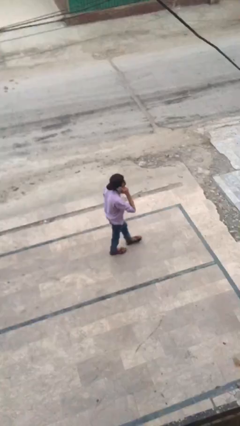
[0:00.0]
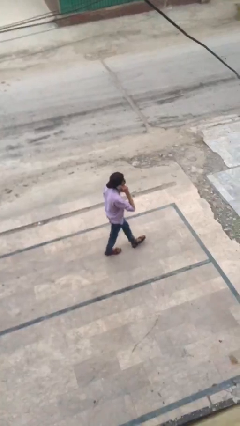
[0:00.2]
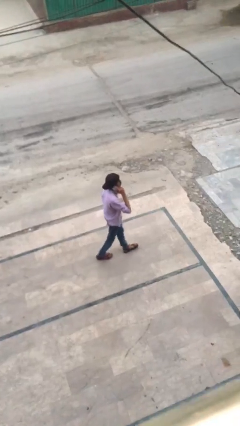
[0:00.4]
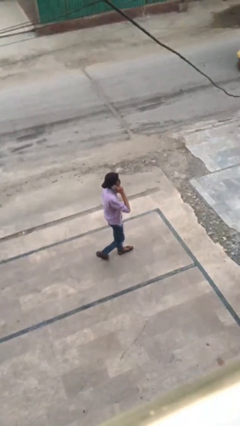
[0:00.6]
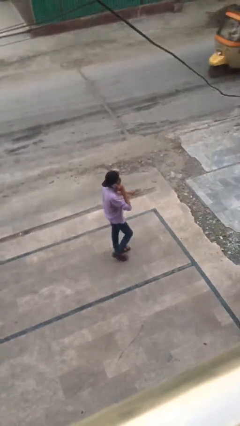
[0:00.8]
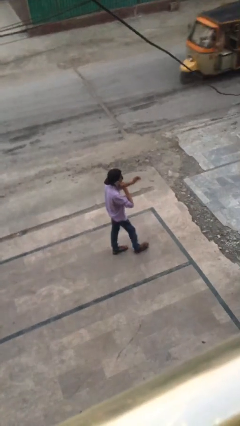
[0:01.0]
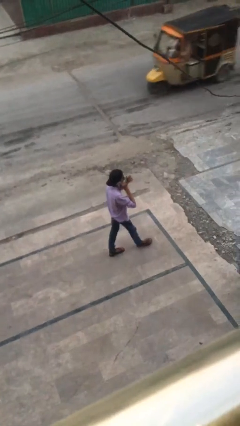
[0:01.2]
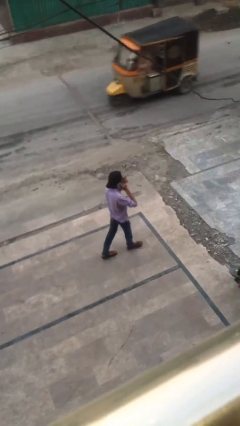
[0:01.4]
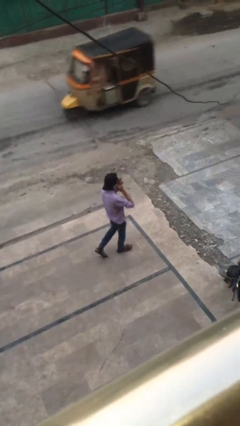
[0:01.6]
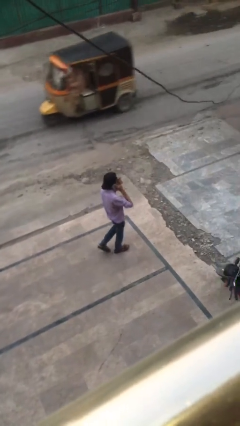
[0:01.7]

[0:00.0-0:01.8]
person talks on phone

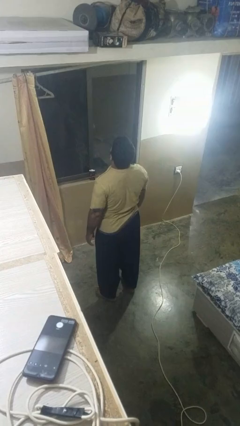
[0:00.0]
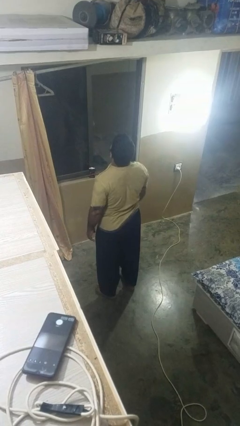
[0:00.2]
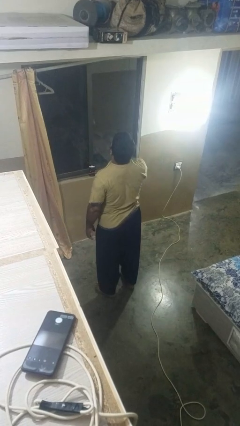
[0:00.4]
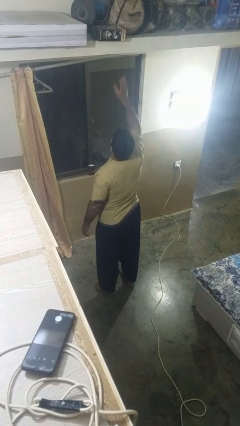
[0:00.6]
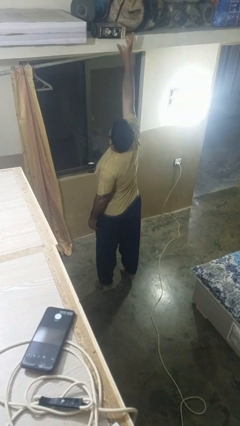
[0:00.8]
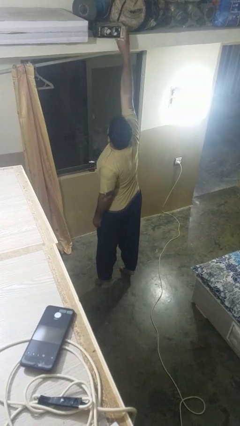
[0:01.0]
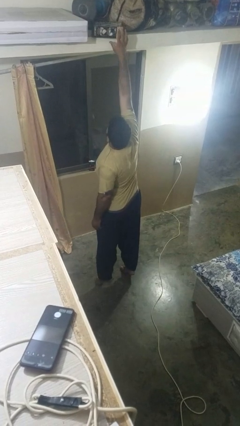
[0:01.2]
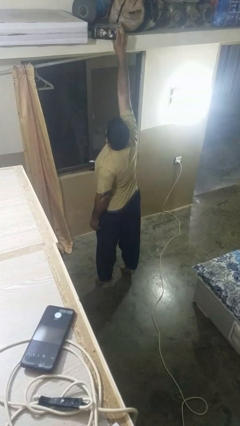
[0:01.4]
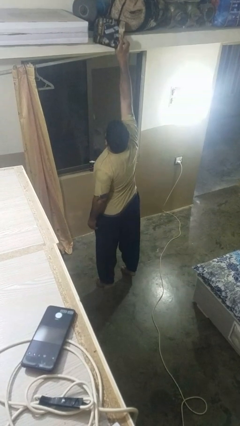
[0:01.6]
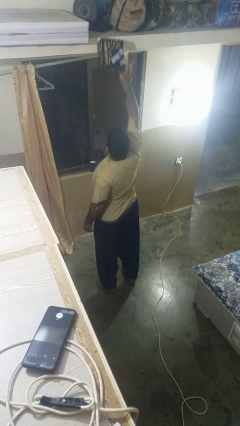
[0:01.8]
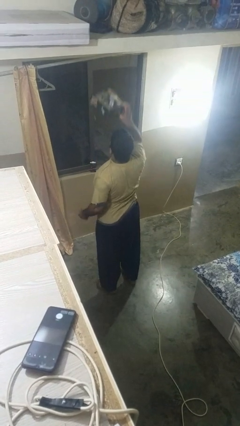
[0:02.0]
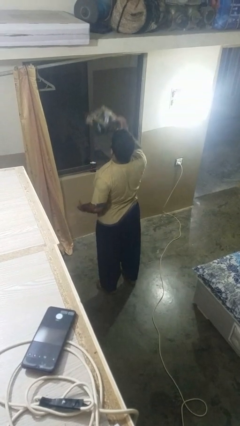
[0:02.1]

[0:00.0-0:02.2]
person picks up object from shelf

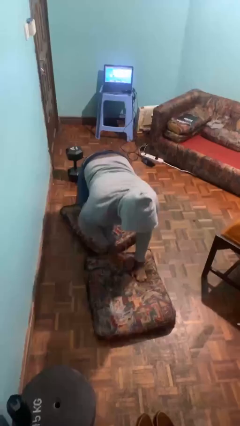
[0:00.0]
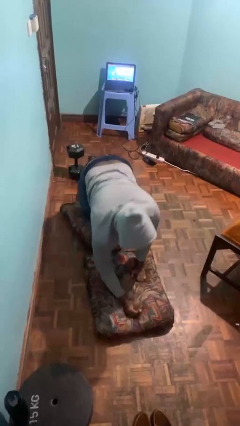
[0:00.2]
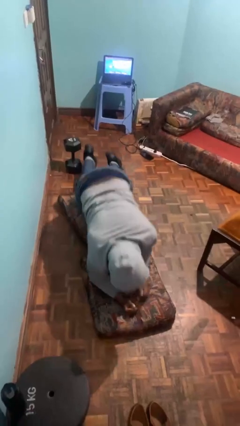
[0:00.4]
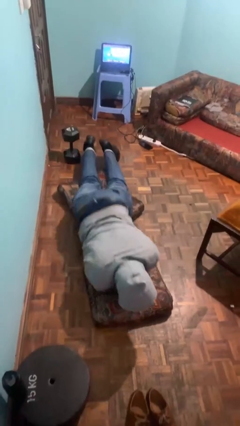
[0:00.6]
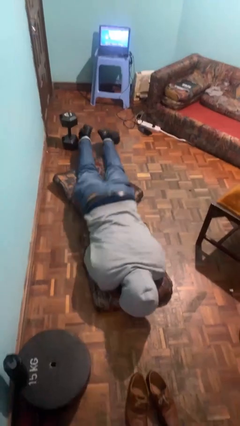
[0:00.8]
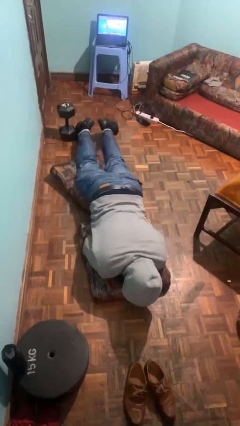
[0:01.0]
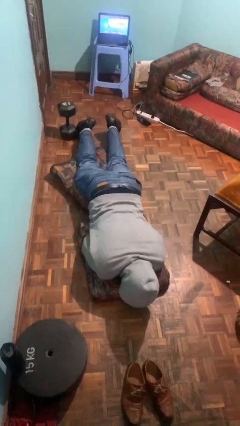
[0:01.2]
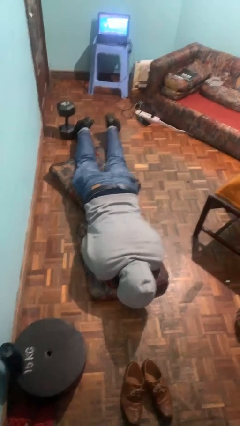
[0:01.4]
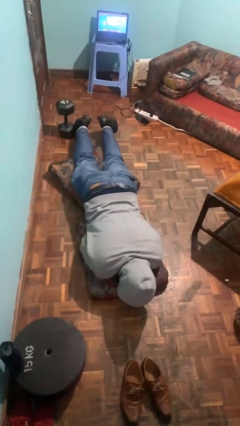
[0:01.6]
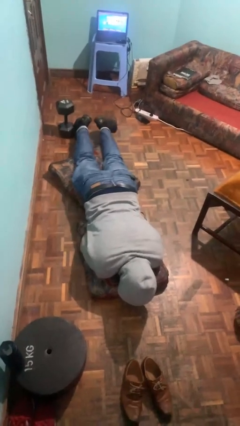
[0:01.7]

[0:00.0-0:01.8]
person lies down on floor

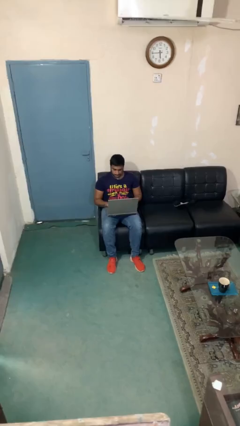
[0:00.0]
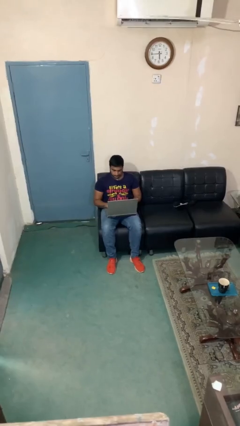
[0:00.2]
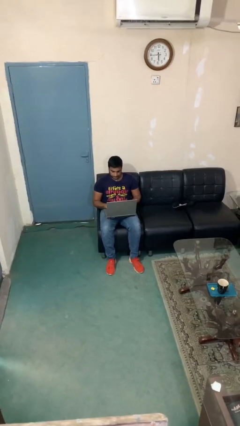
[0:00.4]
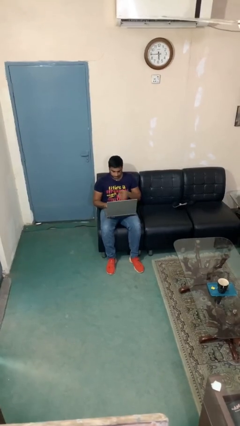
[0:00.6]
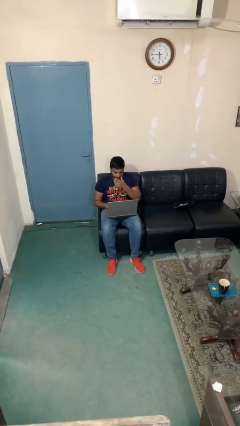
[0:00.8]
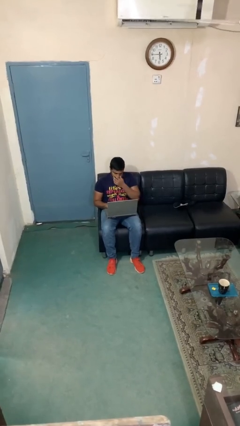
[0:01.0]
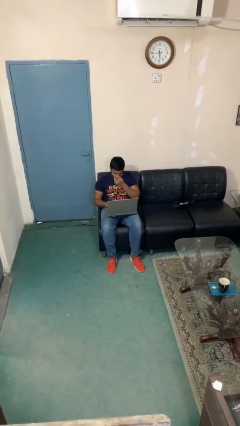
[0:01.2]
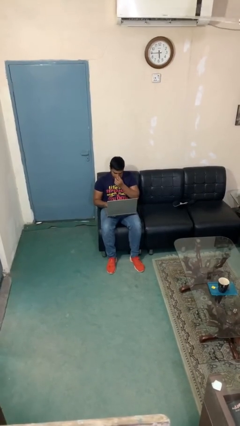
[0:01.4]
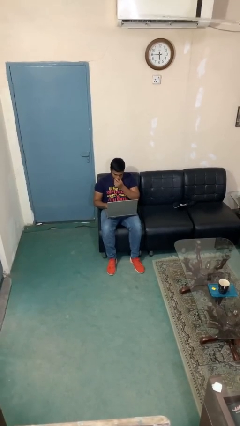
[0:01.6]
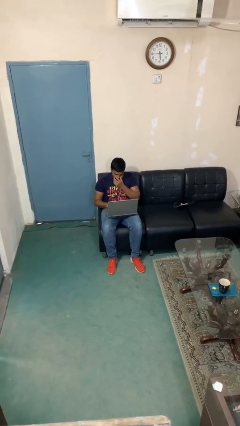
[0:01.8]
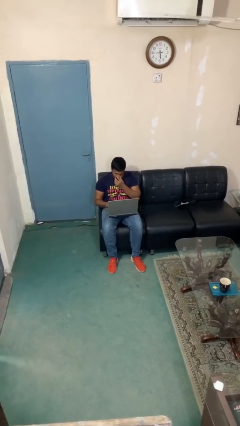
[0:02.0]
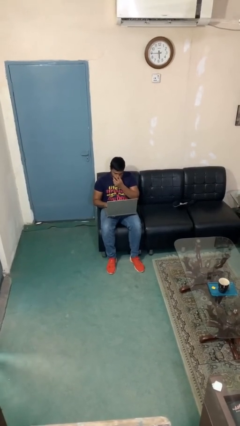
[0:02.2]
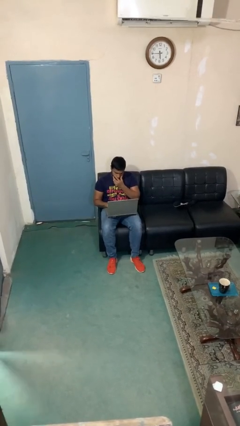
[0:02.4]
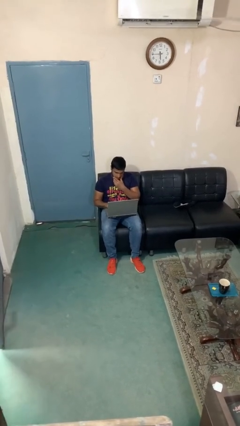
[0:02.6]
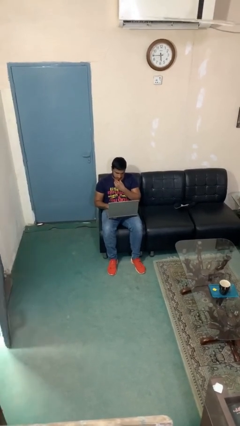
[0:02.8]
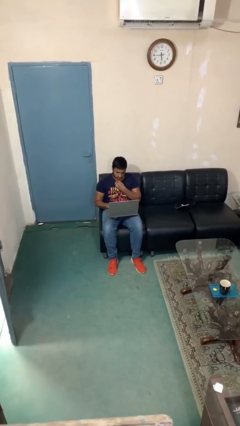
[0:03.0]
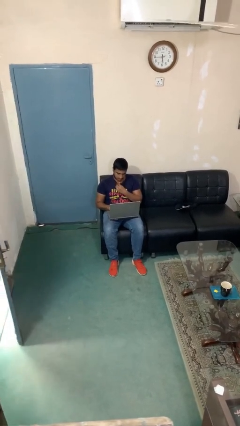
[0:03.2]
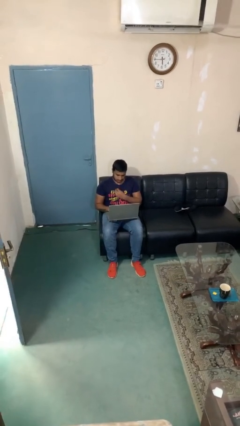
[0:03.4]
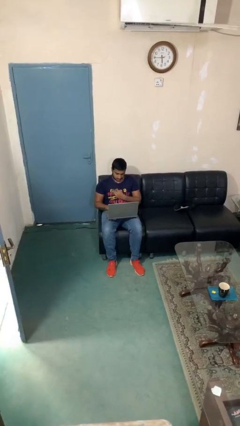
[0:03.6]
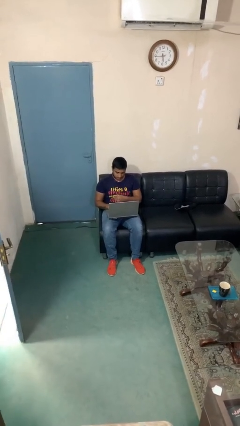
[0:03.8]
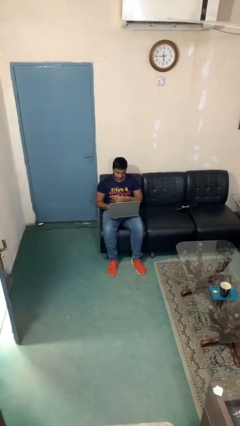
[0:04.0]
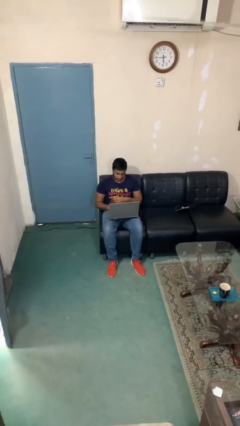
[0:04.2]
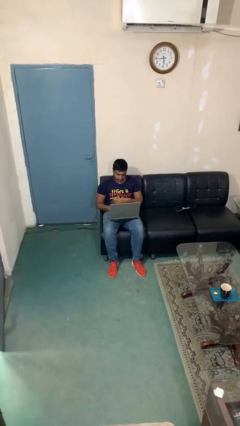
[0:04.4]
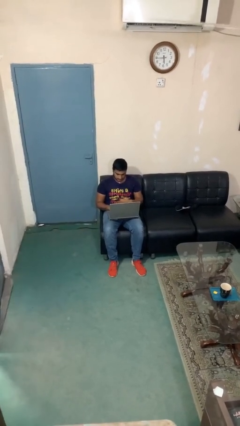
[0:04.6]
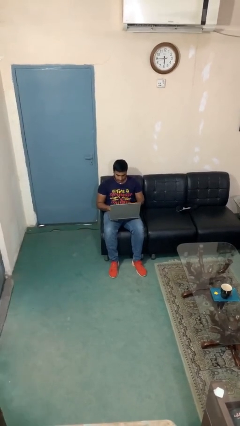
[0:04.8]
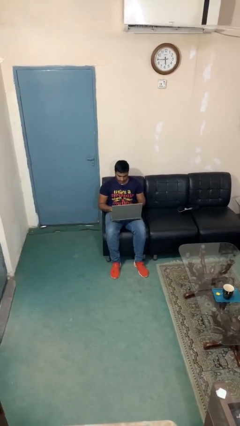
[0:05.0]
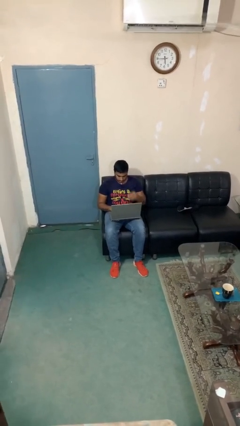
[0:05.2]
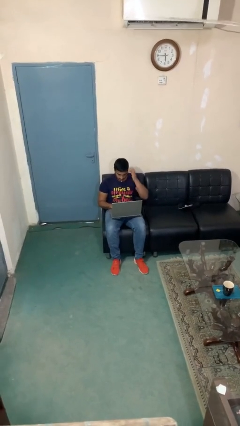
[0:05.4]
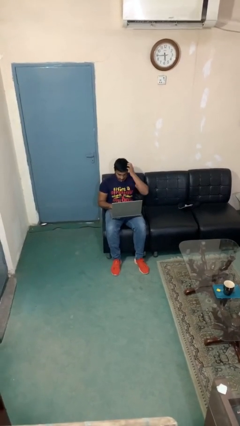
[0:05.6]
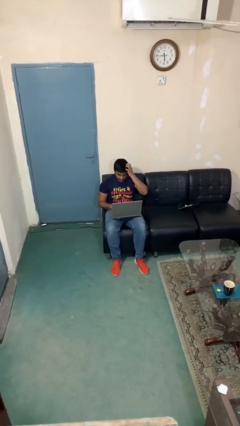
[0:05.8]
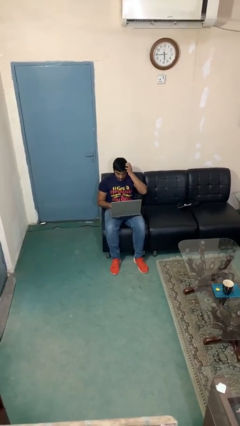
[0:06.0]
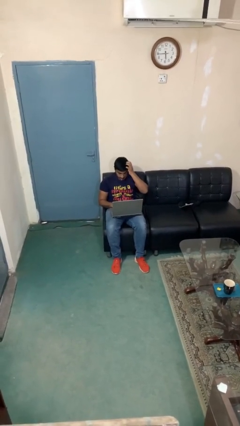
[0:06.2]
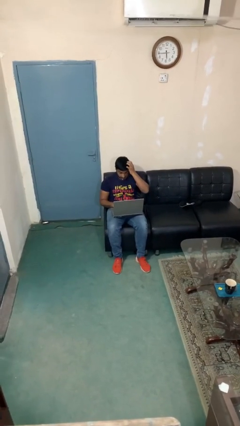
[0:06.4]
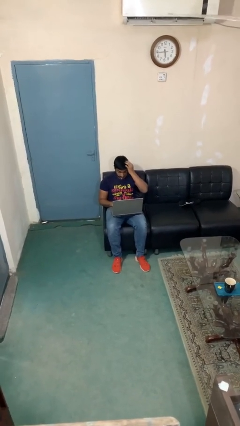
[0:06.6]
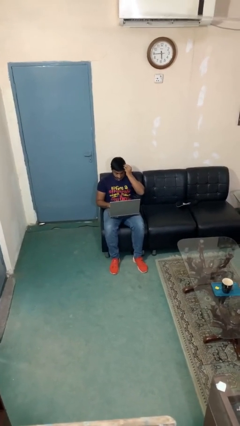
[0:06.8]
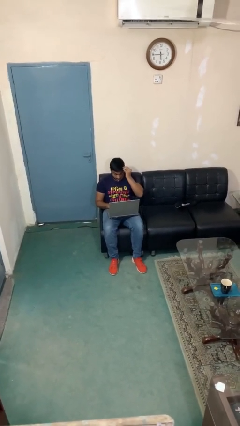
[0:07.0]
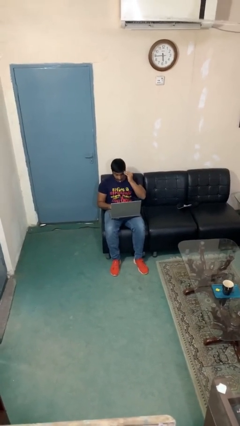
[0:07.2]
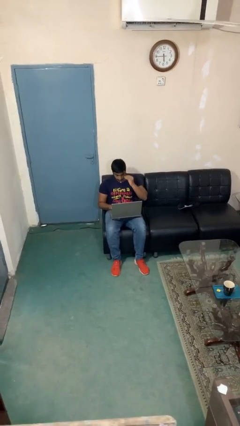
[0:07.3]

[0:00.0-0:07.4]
person interacts with laptop

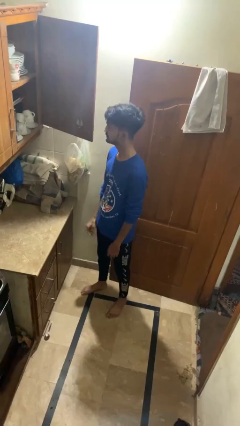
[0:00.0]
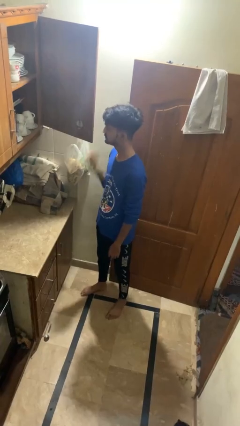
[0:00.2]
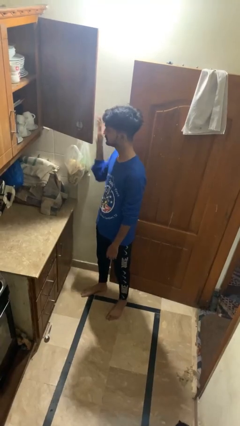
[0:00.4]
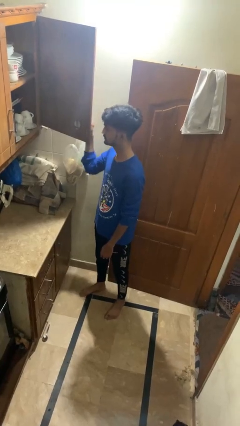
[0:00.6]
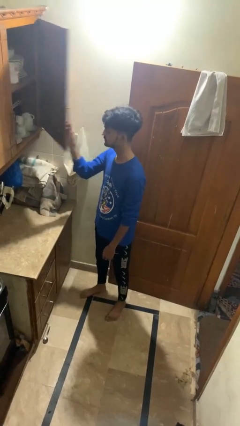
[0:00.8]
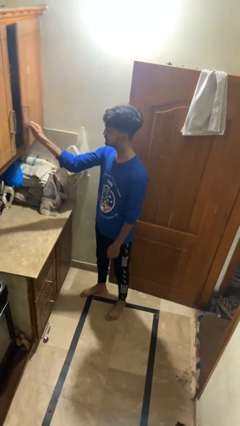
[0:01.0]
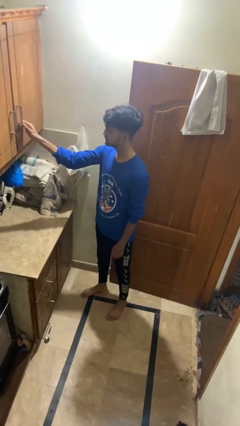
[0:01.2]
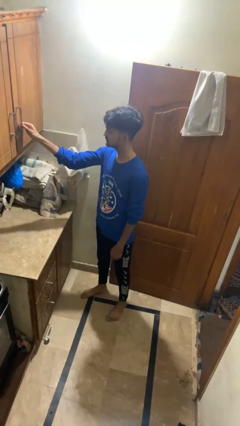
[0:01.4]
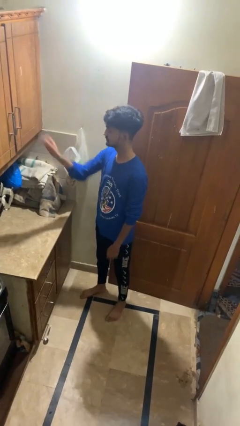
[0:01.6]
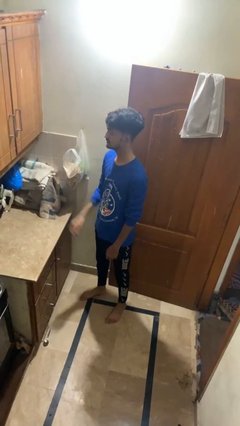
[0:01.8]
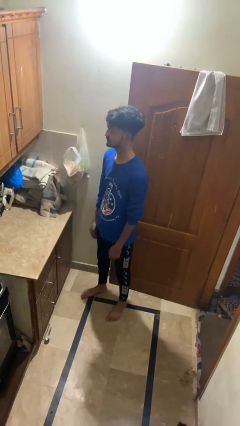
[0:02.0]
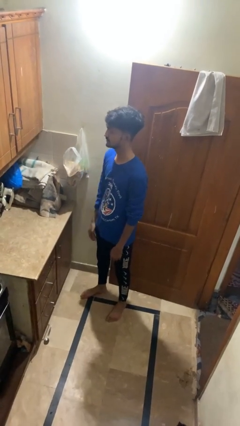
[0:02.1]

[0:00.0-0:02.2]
person closes cabinet

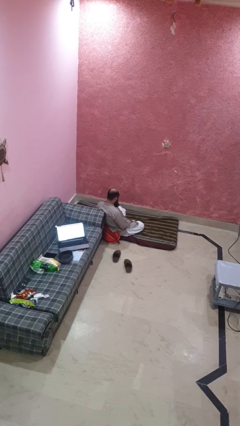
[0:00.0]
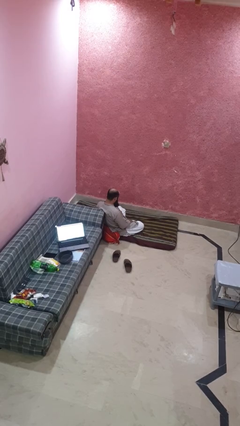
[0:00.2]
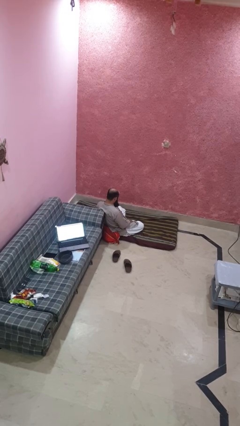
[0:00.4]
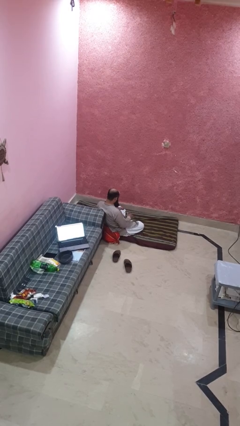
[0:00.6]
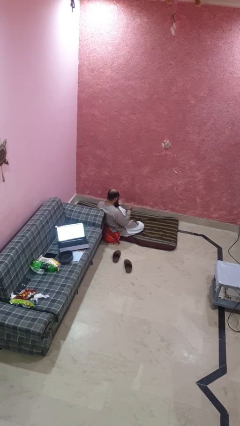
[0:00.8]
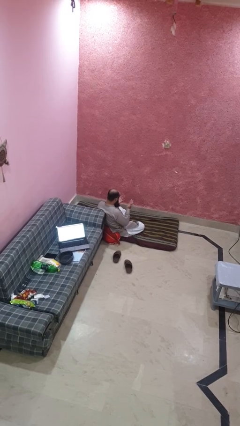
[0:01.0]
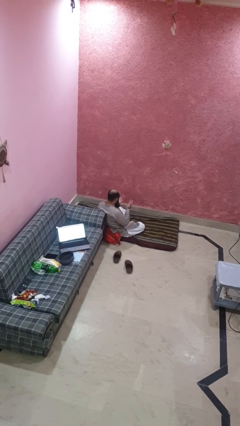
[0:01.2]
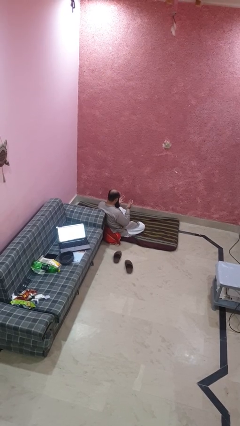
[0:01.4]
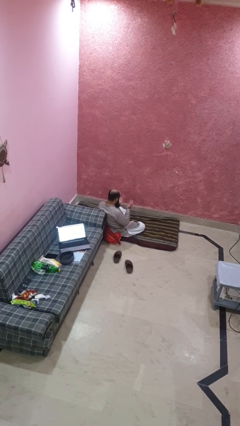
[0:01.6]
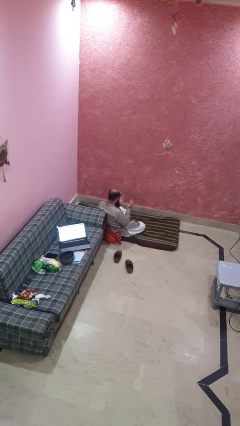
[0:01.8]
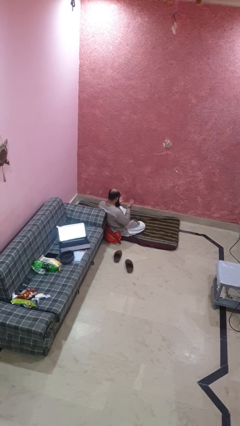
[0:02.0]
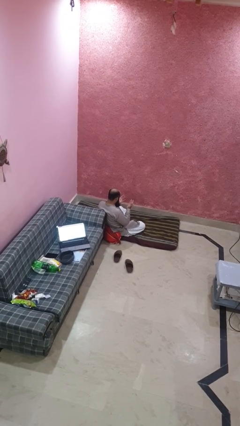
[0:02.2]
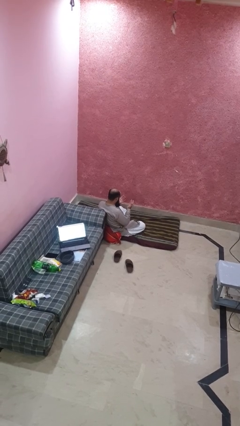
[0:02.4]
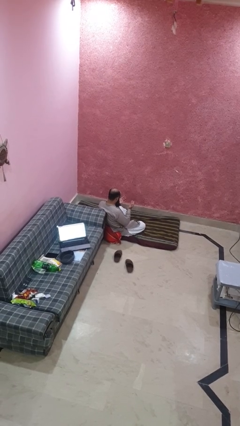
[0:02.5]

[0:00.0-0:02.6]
person looks at hands in lap
